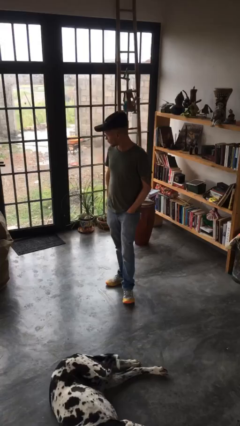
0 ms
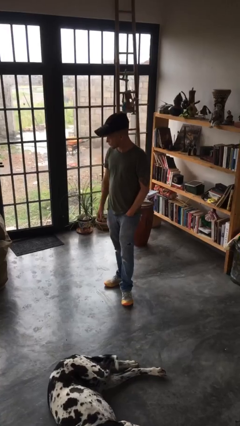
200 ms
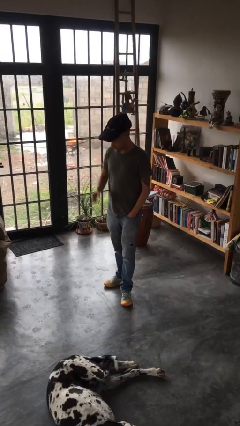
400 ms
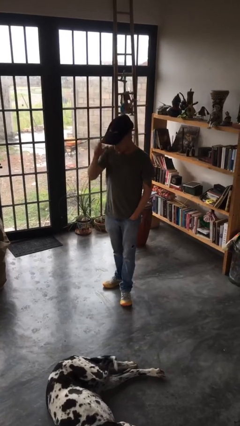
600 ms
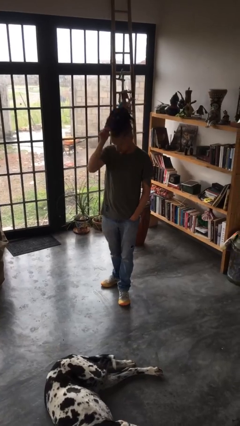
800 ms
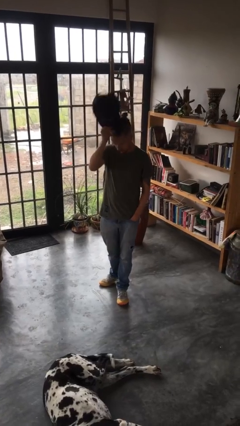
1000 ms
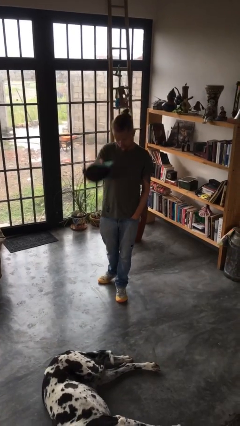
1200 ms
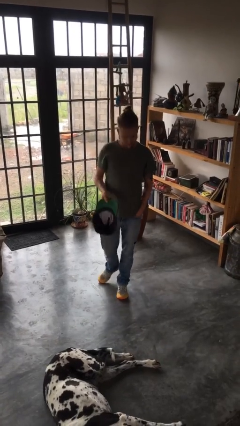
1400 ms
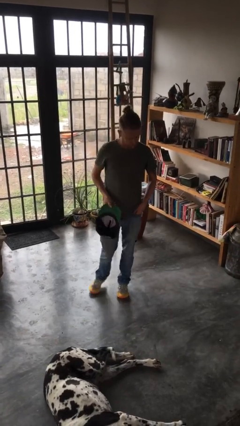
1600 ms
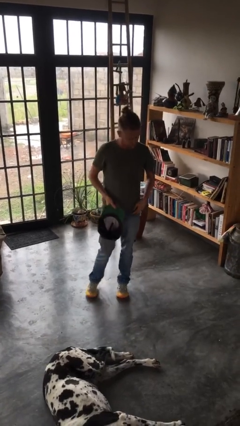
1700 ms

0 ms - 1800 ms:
person takes off hat

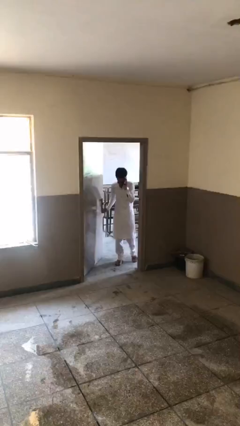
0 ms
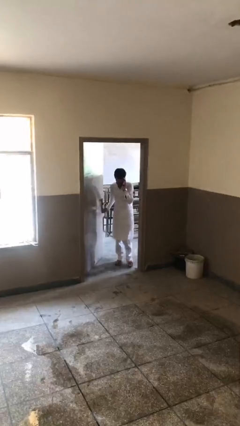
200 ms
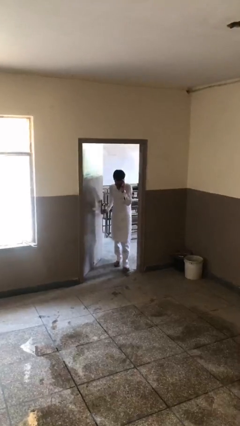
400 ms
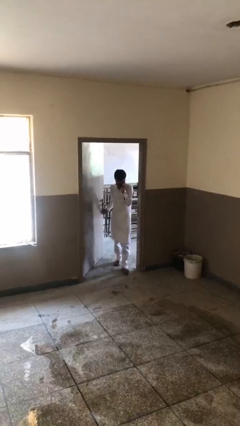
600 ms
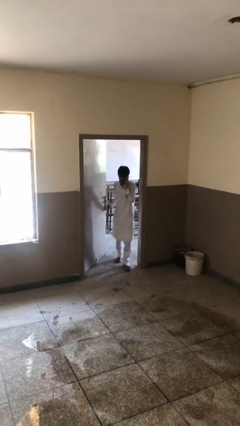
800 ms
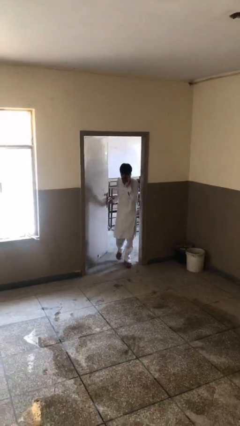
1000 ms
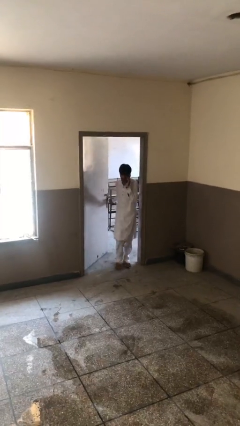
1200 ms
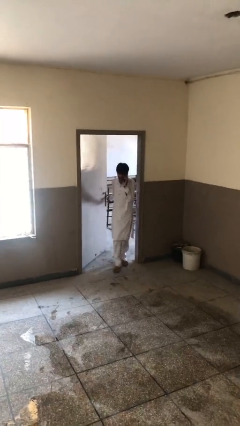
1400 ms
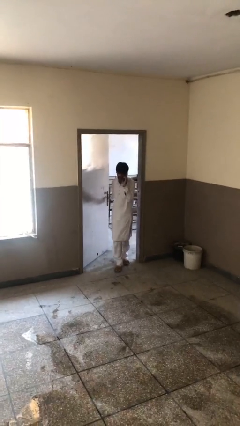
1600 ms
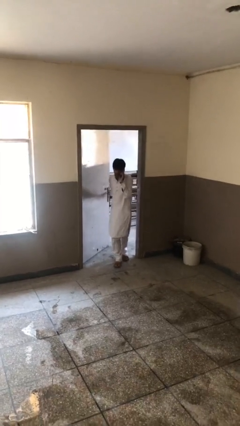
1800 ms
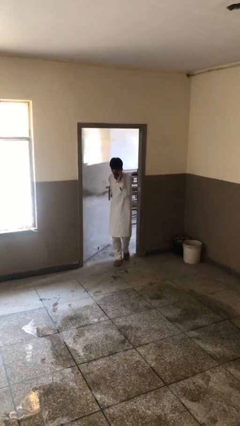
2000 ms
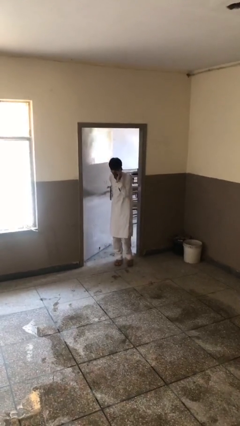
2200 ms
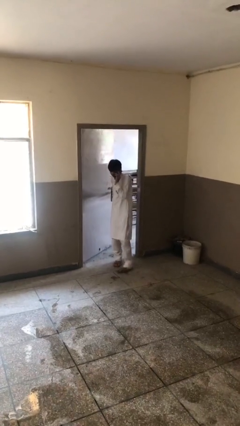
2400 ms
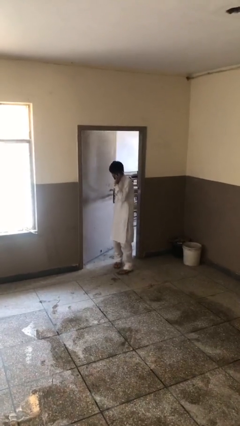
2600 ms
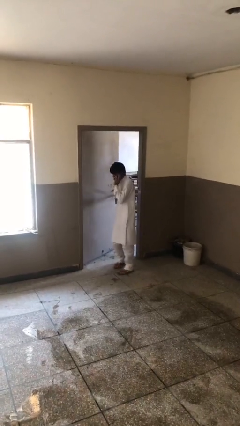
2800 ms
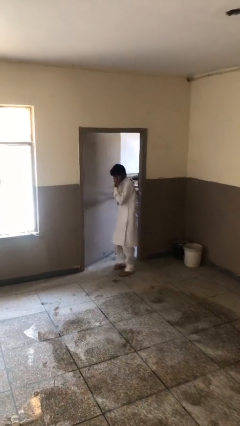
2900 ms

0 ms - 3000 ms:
person enters scene through structure

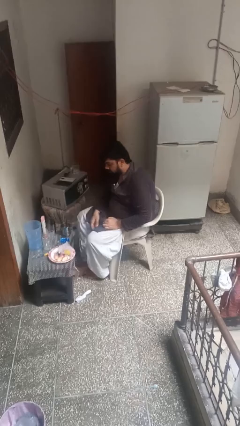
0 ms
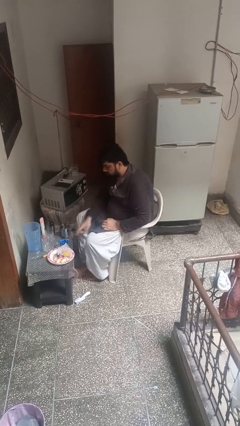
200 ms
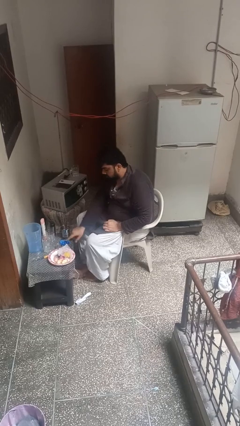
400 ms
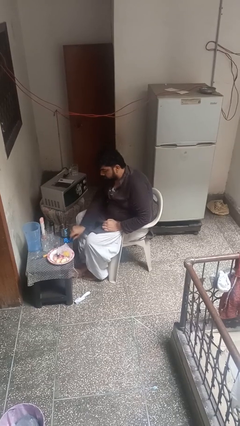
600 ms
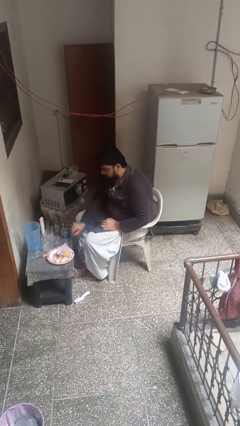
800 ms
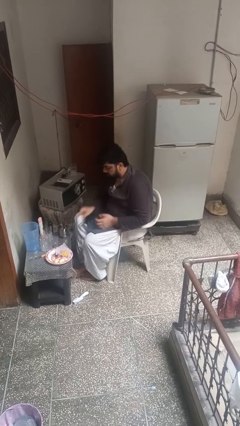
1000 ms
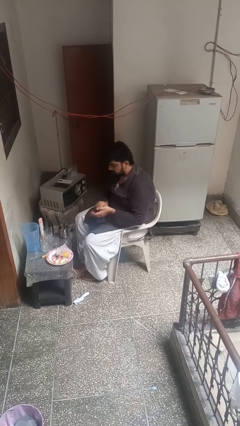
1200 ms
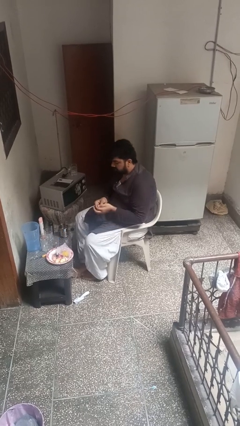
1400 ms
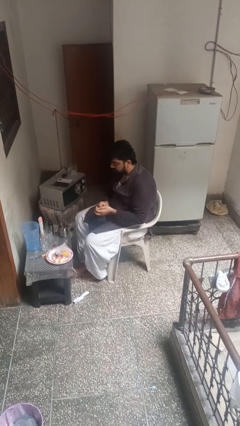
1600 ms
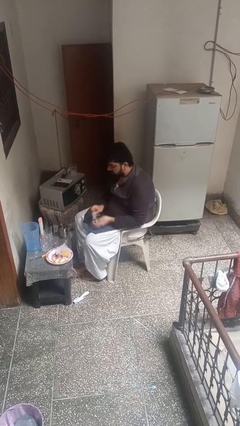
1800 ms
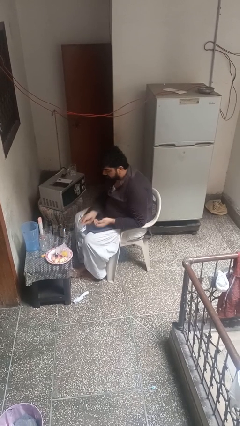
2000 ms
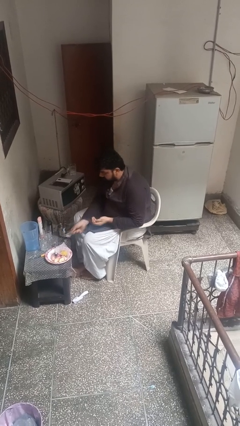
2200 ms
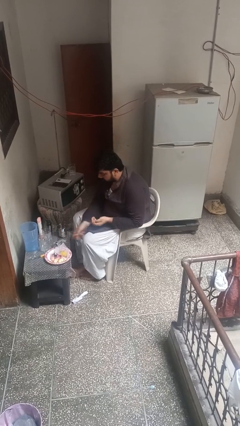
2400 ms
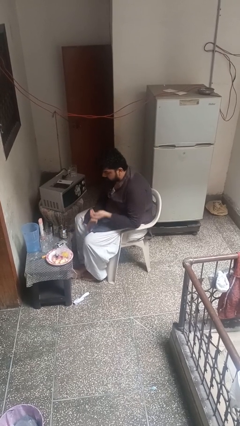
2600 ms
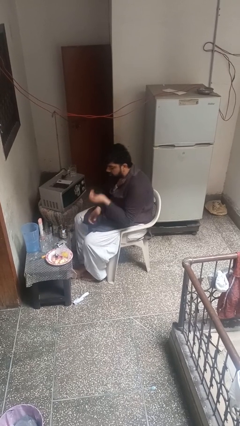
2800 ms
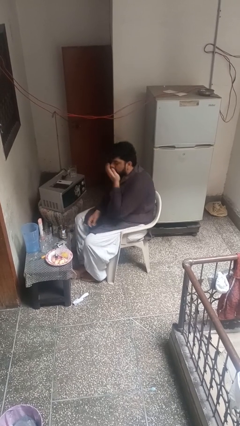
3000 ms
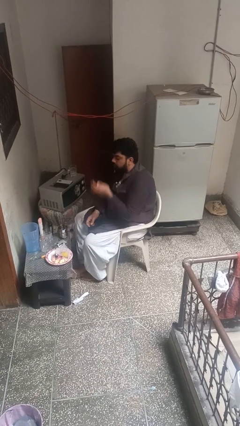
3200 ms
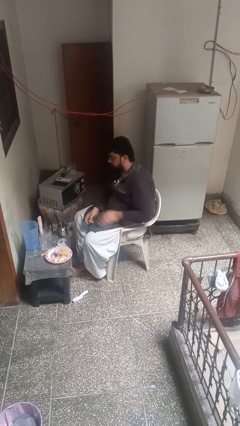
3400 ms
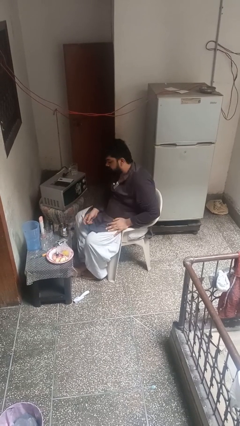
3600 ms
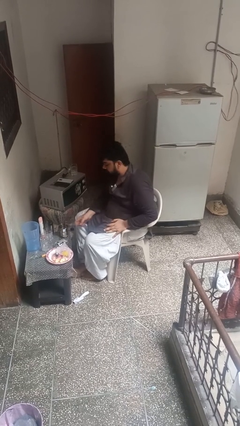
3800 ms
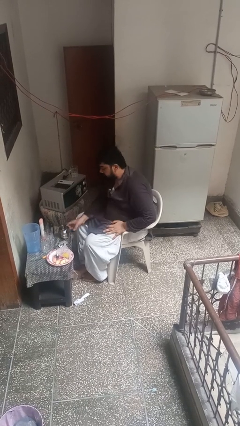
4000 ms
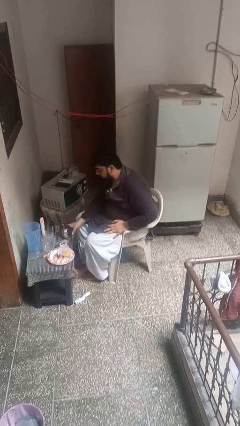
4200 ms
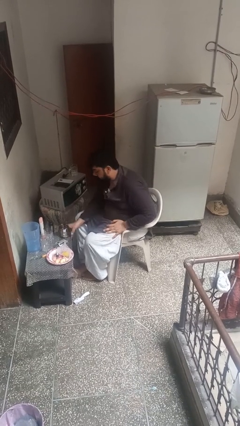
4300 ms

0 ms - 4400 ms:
person takes medicine pills

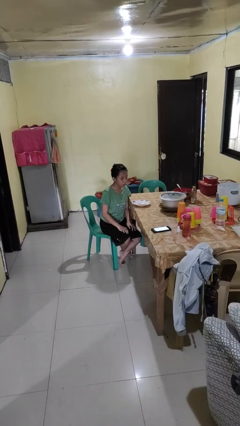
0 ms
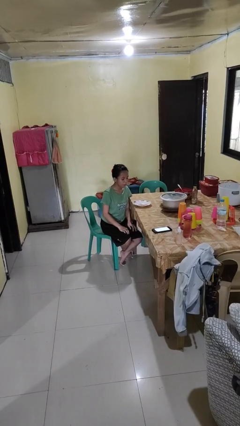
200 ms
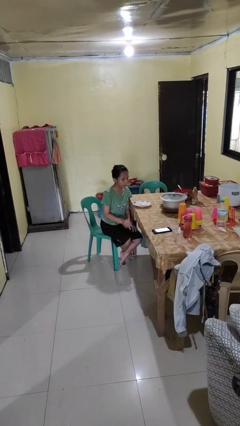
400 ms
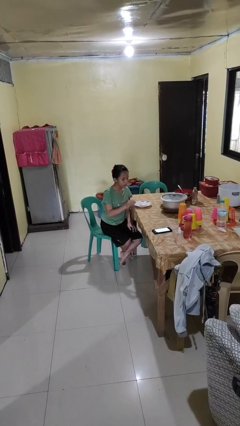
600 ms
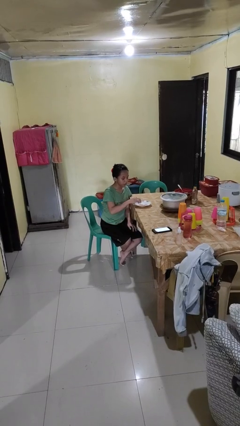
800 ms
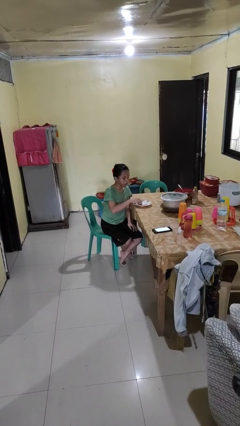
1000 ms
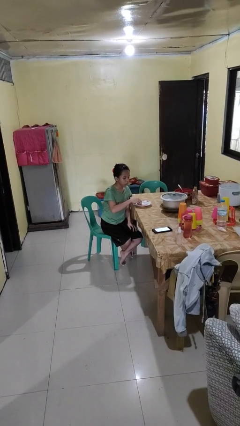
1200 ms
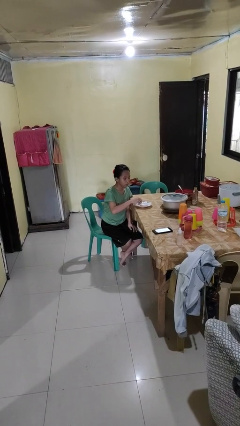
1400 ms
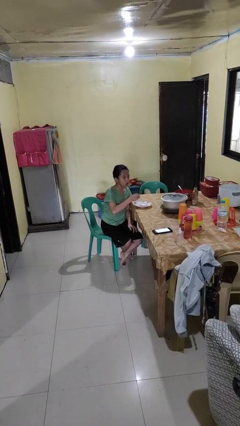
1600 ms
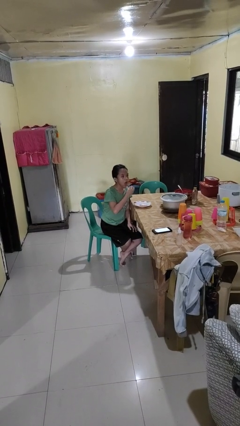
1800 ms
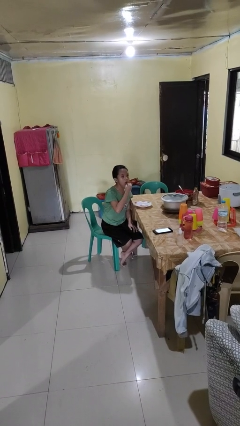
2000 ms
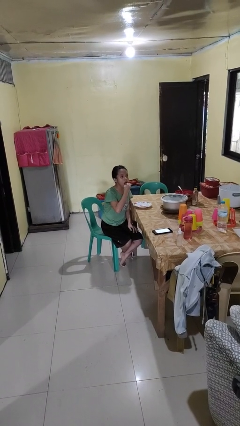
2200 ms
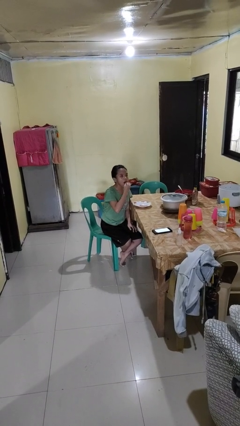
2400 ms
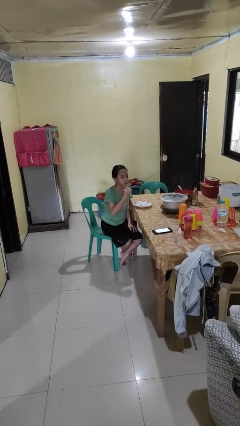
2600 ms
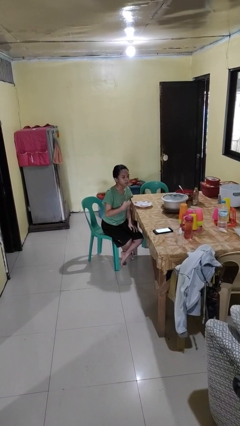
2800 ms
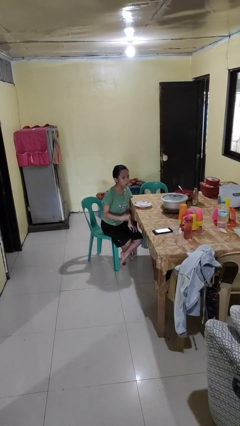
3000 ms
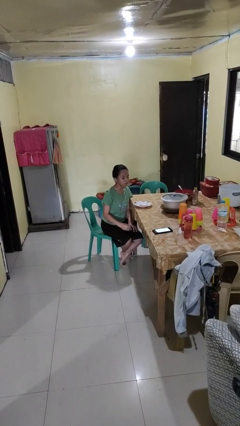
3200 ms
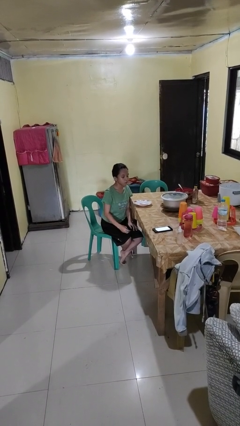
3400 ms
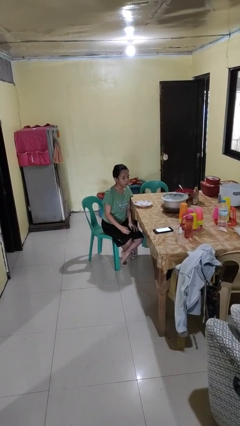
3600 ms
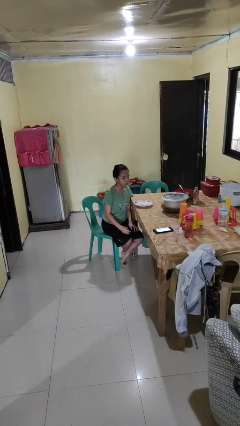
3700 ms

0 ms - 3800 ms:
person eats with hands

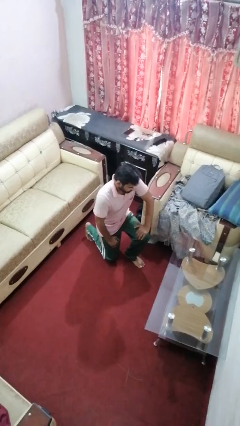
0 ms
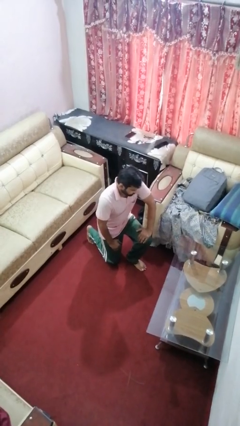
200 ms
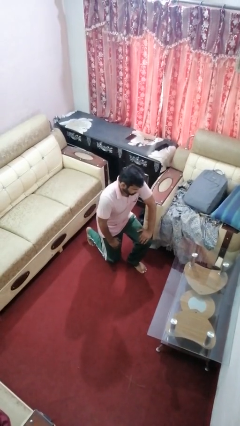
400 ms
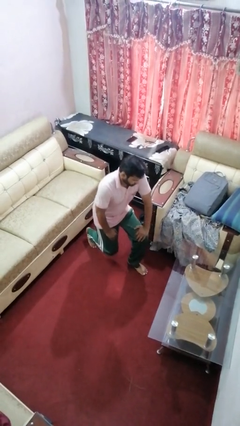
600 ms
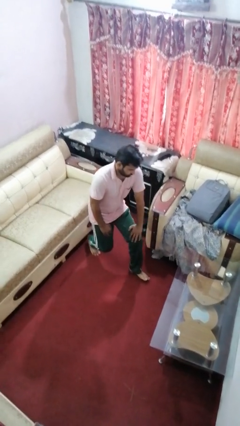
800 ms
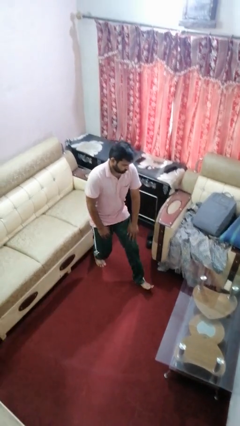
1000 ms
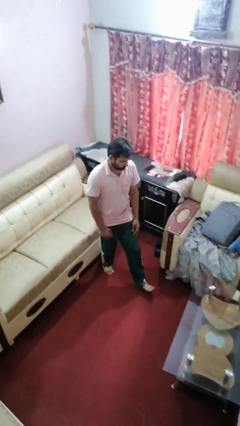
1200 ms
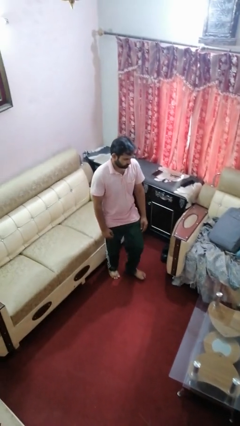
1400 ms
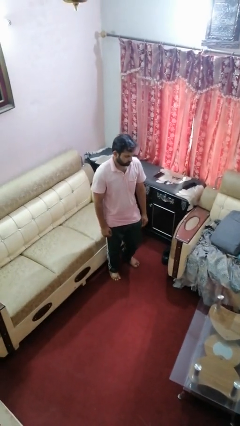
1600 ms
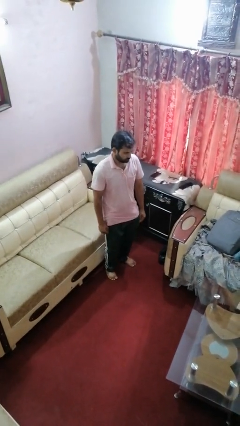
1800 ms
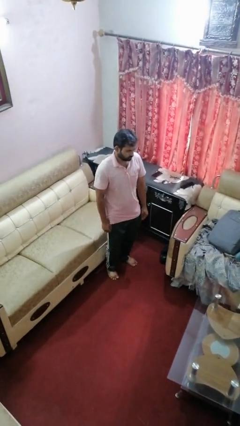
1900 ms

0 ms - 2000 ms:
person stands up from floor

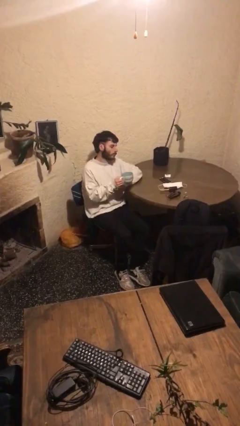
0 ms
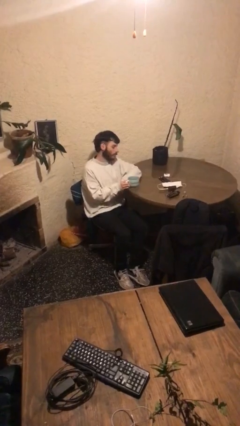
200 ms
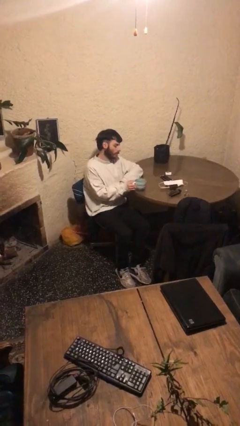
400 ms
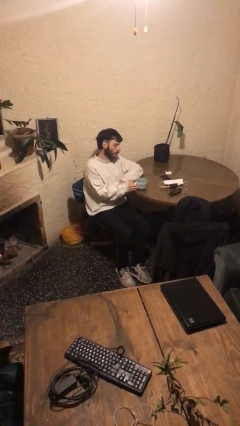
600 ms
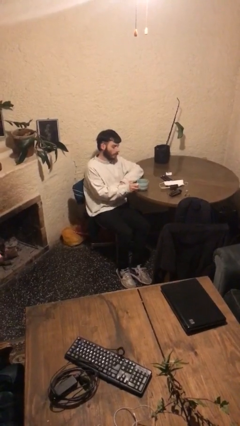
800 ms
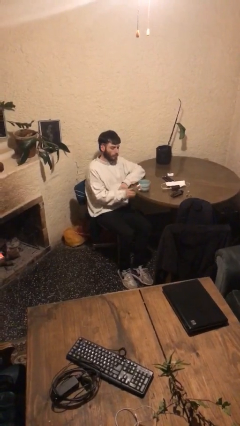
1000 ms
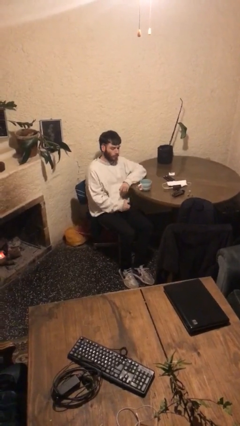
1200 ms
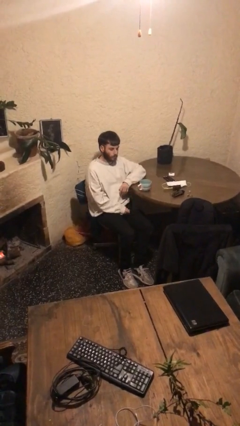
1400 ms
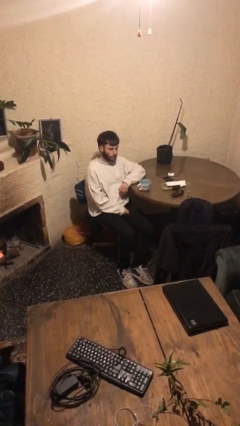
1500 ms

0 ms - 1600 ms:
person puts down object on table

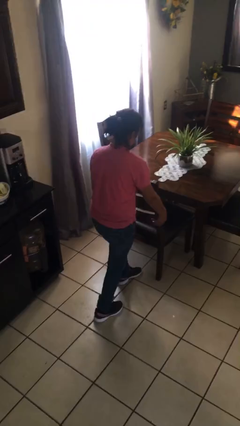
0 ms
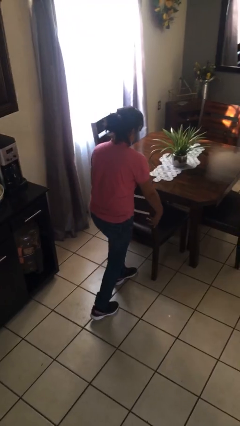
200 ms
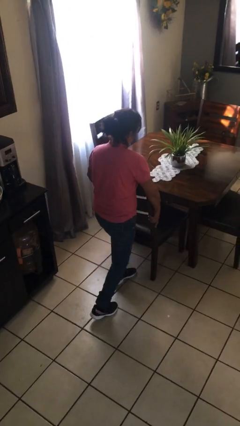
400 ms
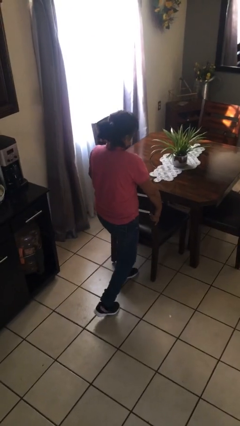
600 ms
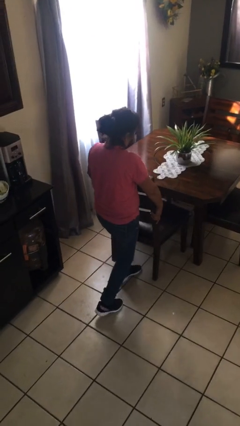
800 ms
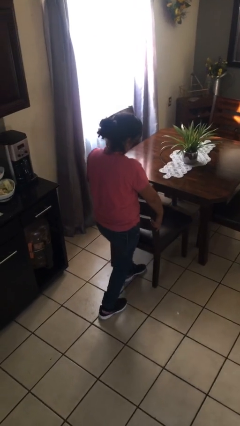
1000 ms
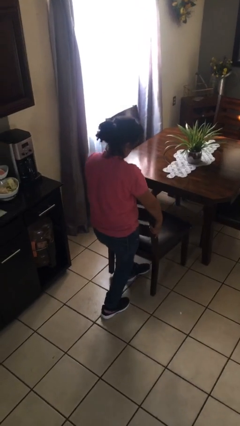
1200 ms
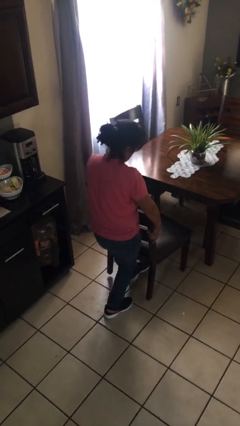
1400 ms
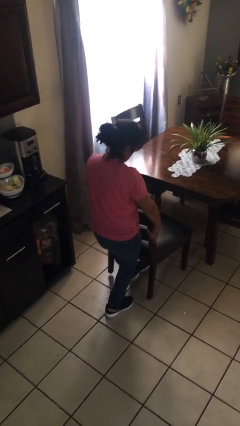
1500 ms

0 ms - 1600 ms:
person pulls out chair
